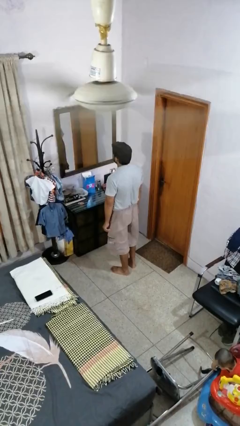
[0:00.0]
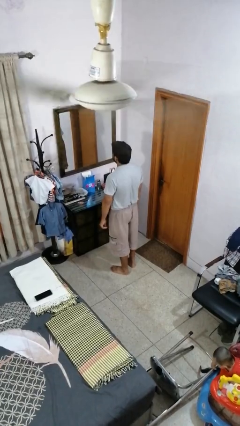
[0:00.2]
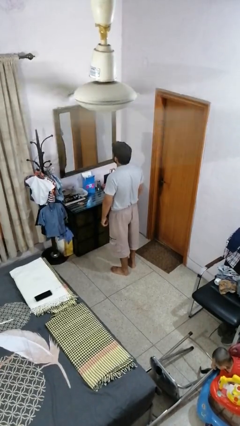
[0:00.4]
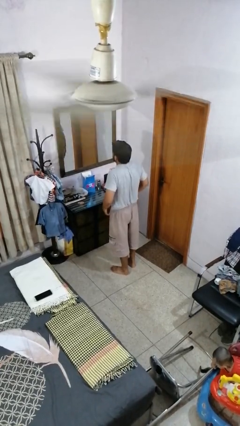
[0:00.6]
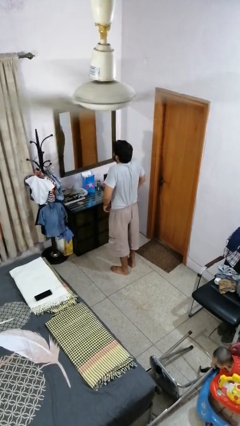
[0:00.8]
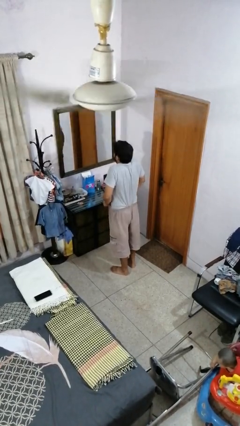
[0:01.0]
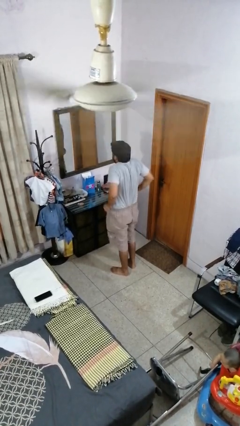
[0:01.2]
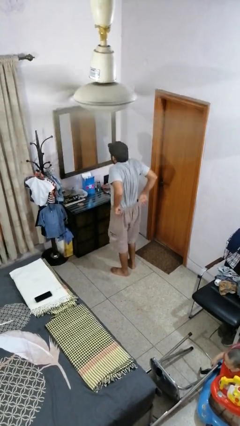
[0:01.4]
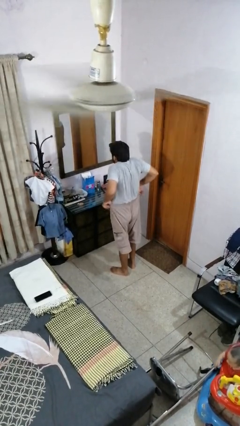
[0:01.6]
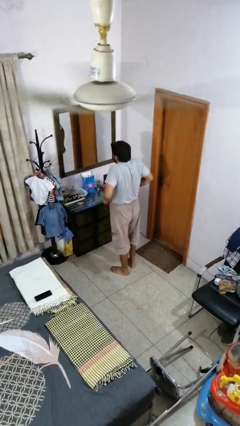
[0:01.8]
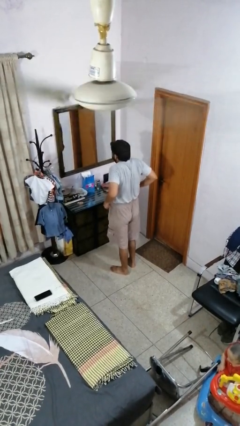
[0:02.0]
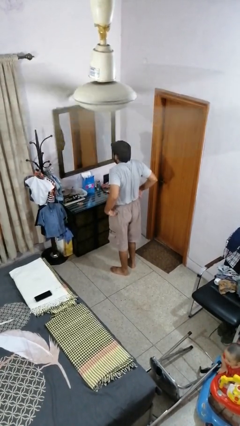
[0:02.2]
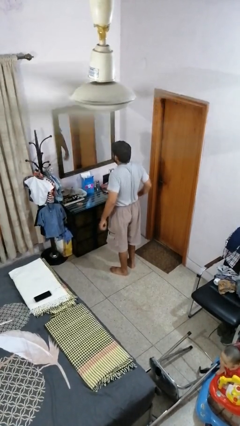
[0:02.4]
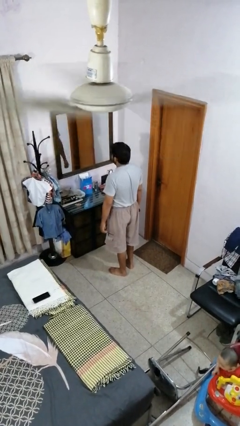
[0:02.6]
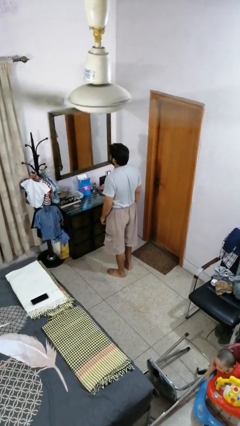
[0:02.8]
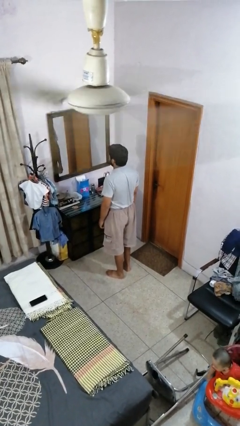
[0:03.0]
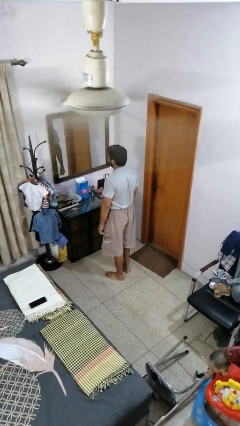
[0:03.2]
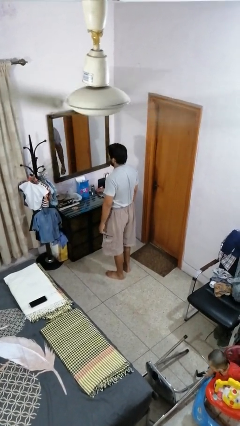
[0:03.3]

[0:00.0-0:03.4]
person hikes up pants

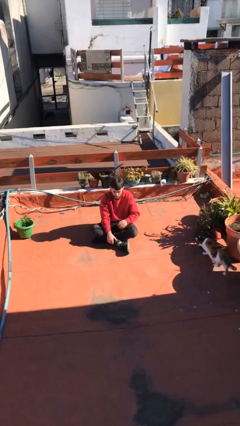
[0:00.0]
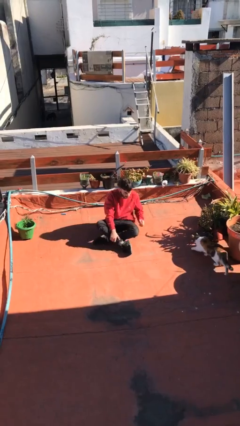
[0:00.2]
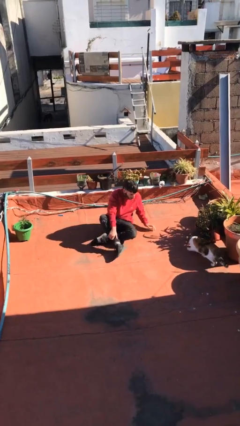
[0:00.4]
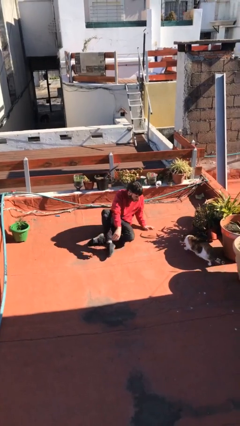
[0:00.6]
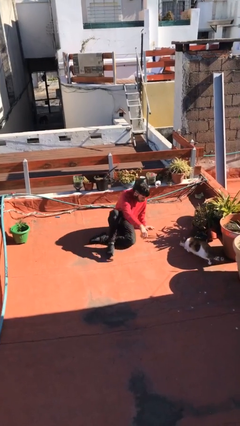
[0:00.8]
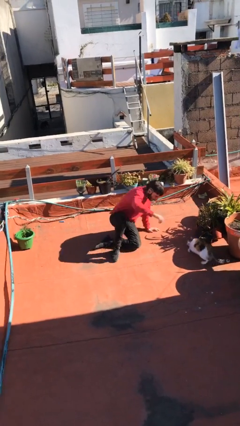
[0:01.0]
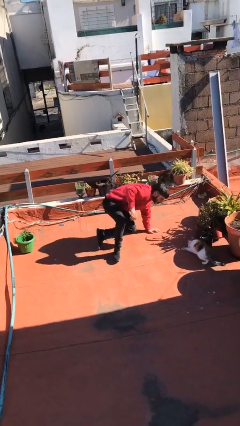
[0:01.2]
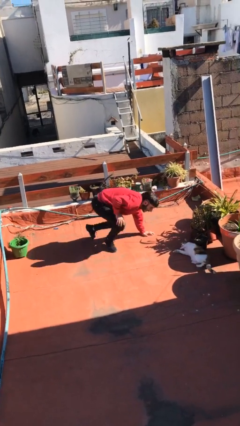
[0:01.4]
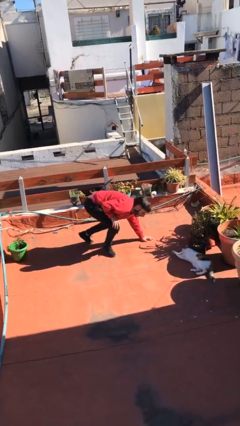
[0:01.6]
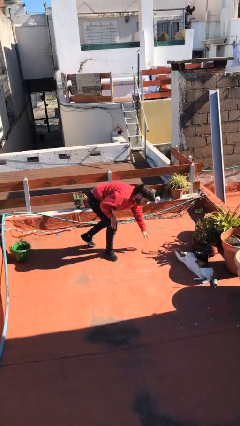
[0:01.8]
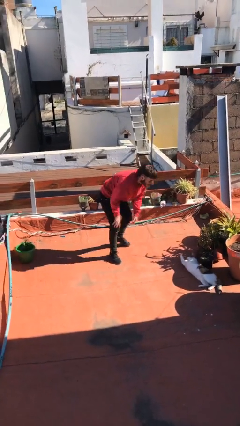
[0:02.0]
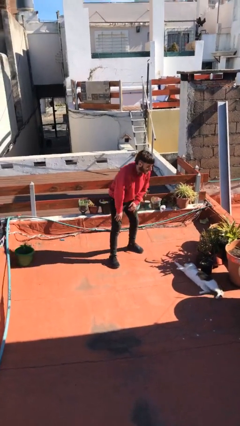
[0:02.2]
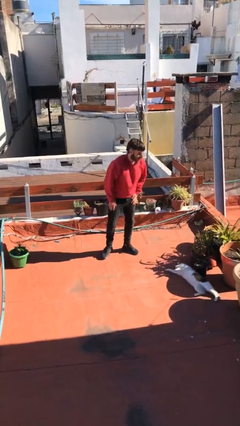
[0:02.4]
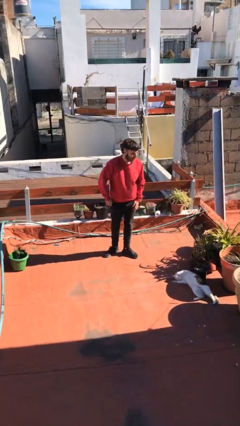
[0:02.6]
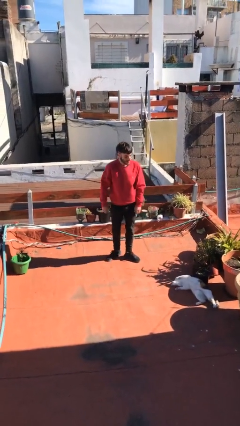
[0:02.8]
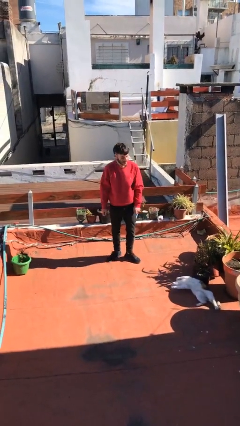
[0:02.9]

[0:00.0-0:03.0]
person stands up from floor

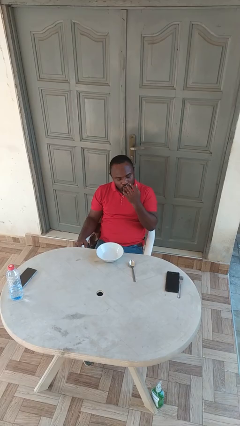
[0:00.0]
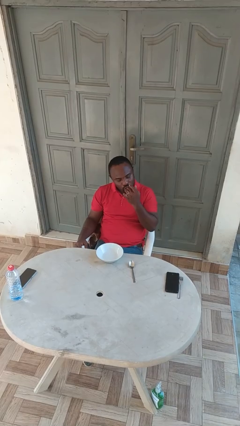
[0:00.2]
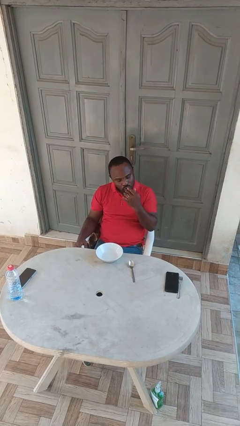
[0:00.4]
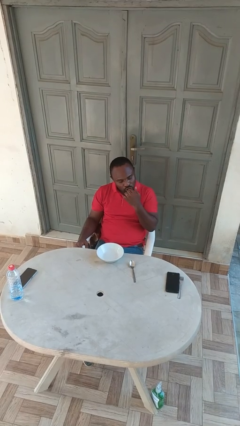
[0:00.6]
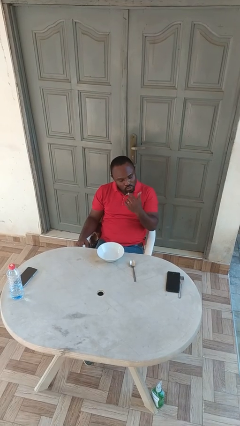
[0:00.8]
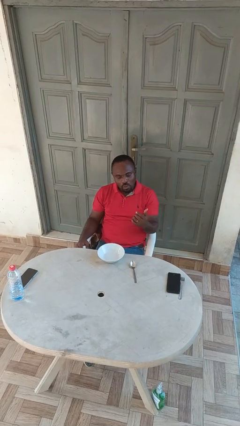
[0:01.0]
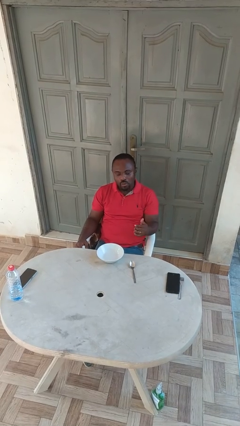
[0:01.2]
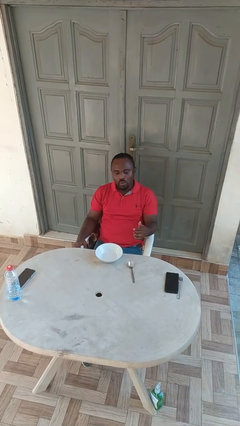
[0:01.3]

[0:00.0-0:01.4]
person licks fingers

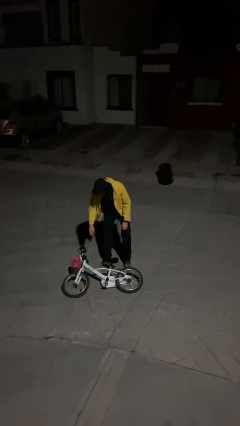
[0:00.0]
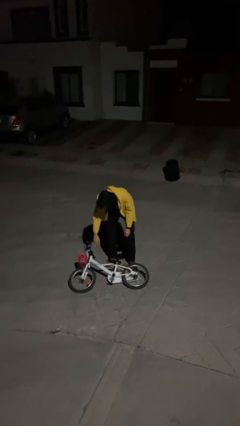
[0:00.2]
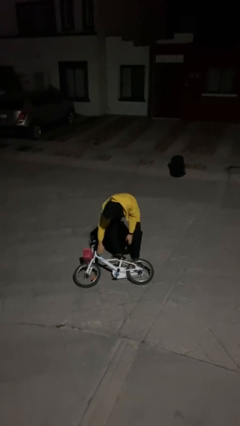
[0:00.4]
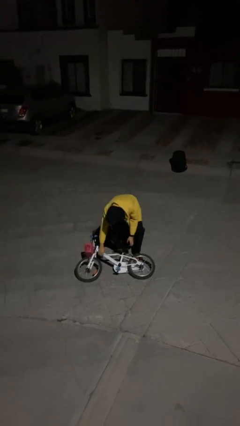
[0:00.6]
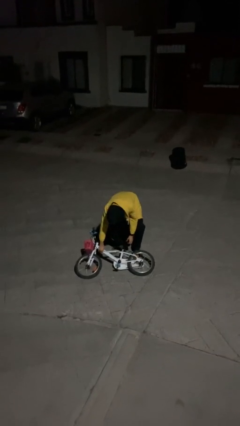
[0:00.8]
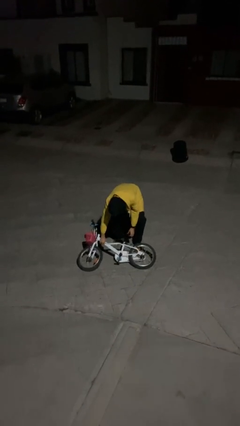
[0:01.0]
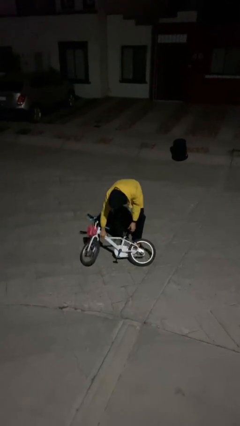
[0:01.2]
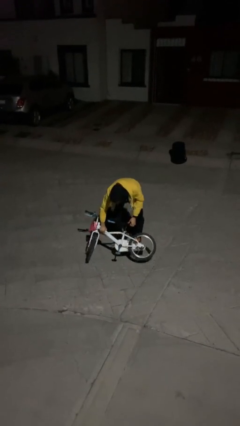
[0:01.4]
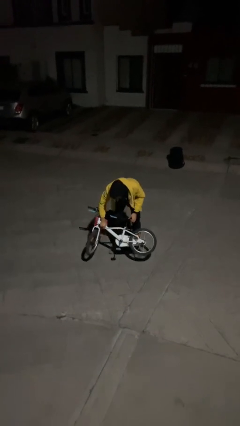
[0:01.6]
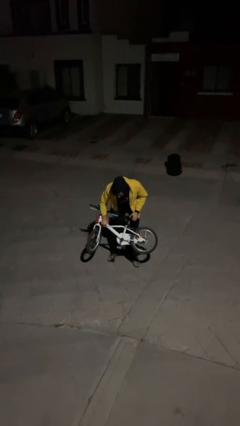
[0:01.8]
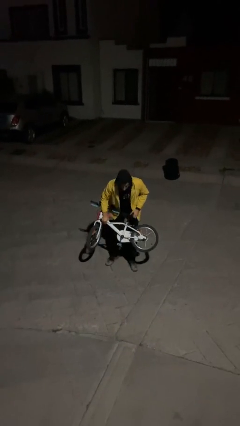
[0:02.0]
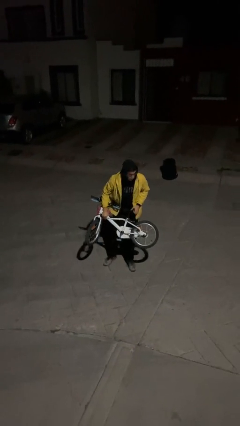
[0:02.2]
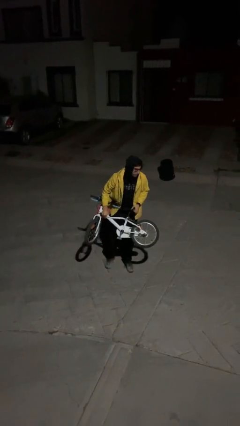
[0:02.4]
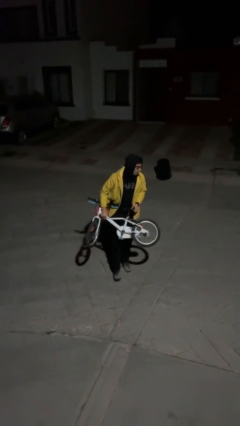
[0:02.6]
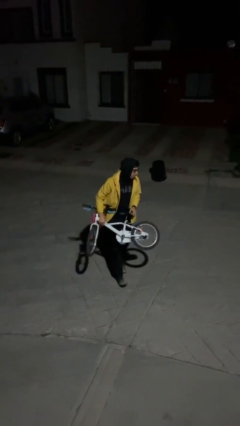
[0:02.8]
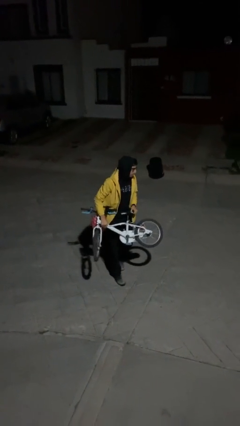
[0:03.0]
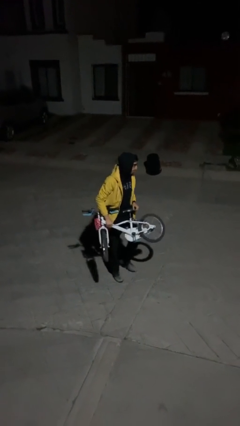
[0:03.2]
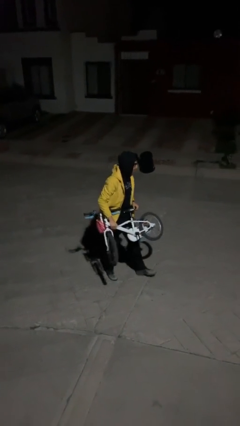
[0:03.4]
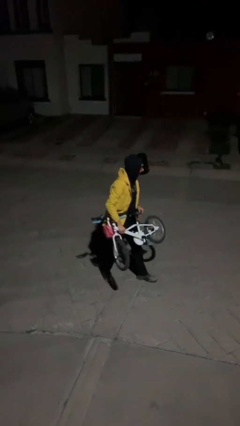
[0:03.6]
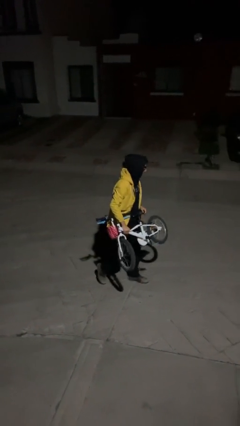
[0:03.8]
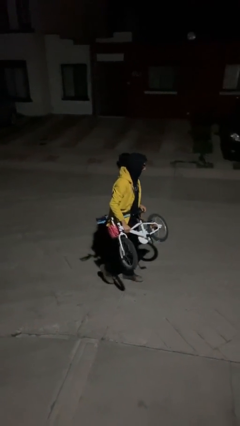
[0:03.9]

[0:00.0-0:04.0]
person picks up object from floor

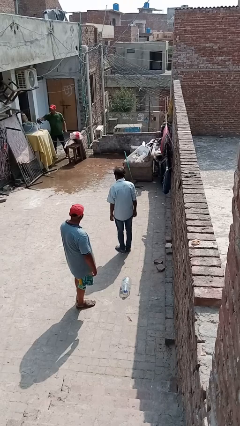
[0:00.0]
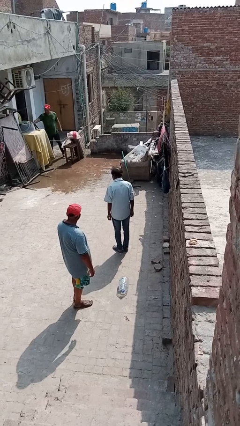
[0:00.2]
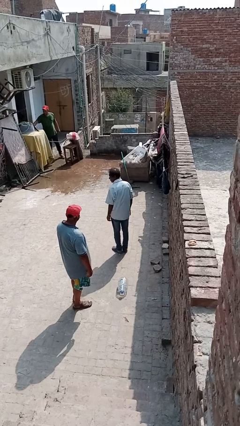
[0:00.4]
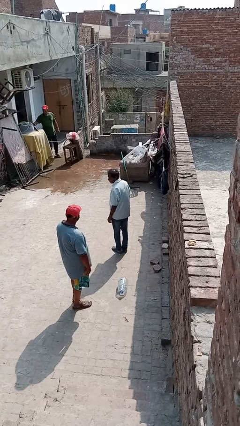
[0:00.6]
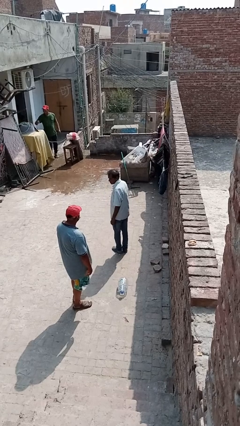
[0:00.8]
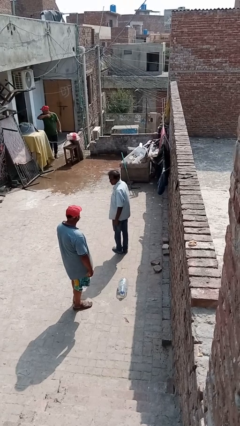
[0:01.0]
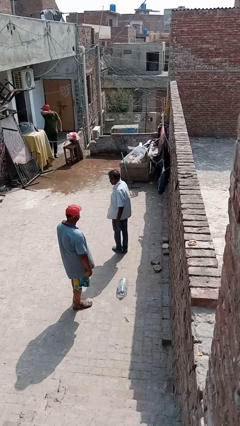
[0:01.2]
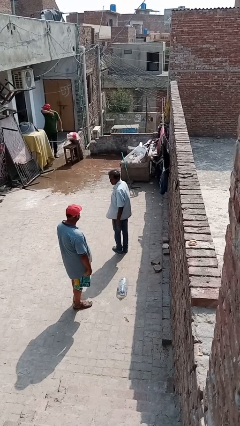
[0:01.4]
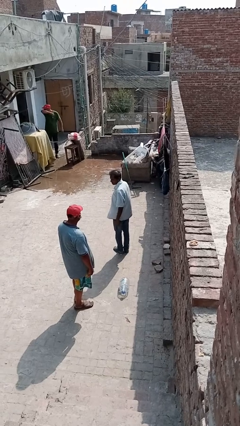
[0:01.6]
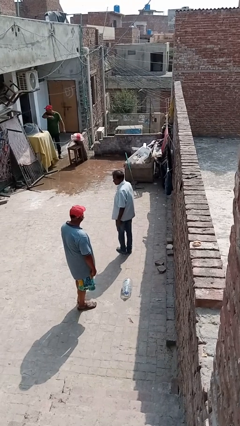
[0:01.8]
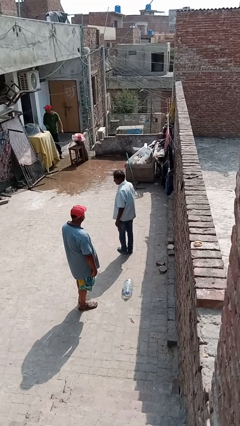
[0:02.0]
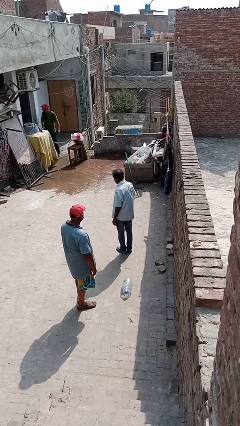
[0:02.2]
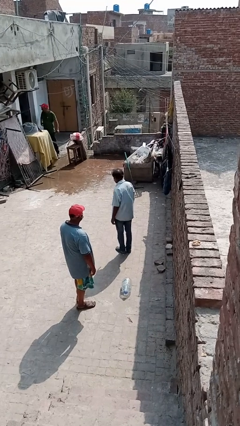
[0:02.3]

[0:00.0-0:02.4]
person looks over shoulder

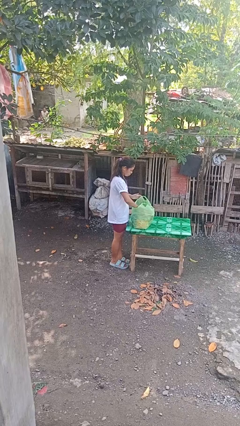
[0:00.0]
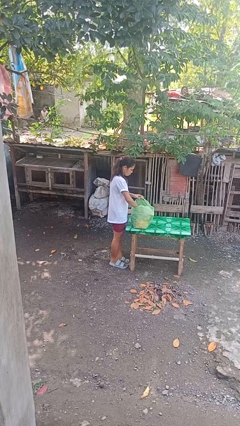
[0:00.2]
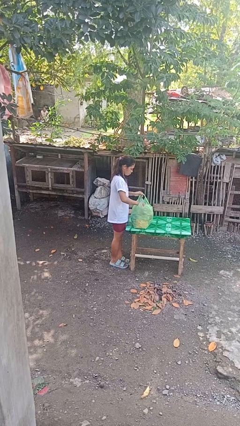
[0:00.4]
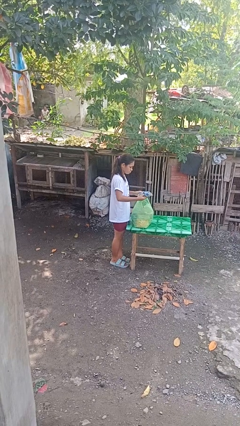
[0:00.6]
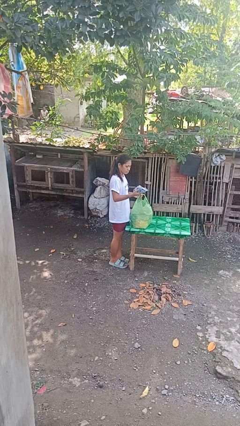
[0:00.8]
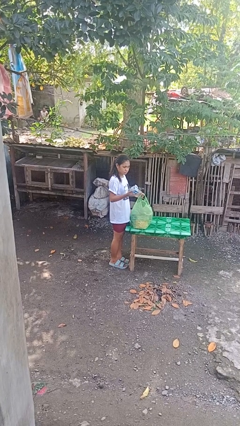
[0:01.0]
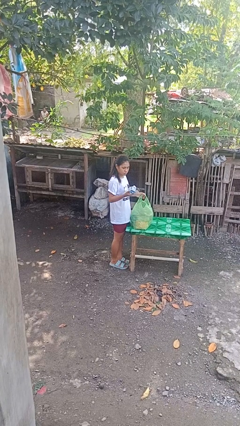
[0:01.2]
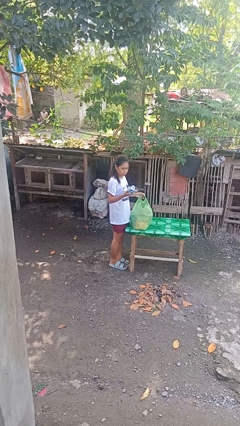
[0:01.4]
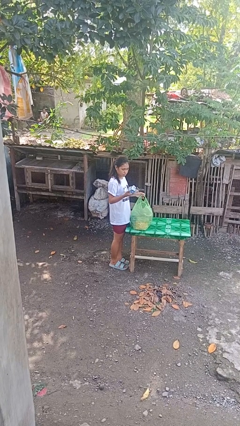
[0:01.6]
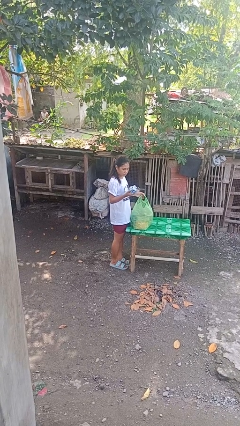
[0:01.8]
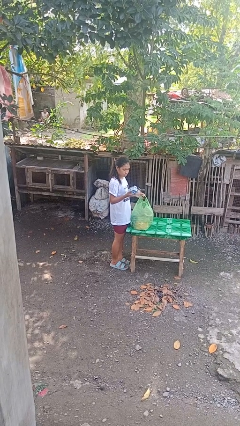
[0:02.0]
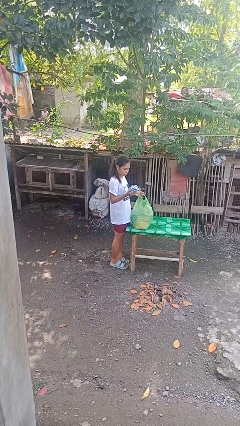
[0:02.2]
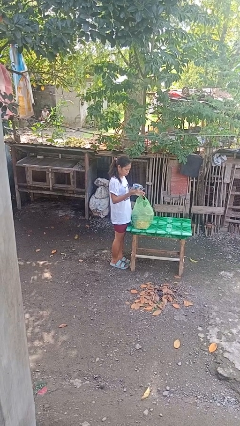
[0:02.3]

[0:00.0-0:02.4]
person takes object from bag

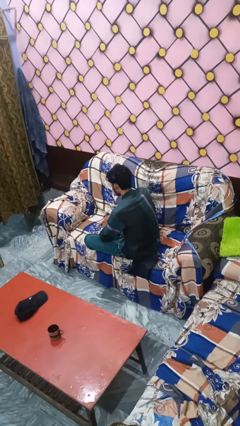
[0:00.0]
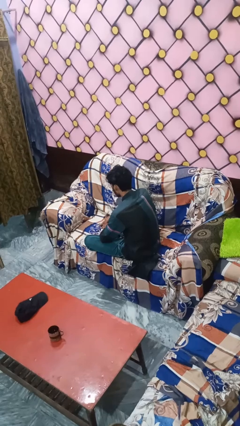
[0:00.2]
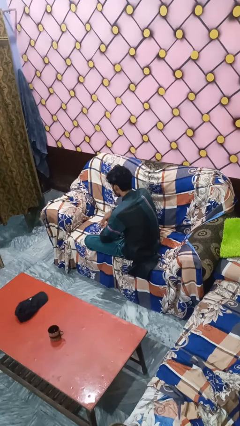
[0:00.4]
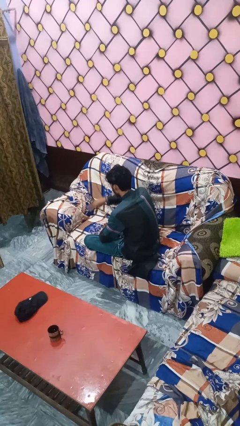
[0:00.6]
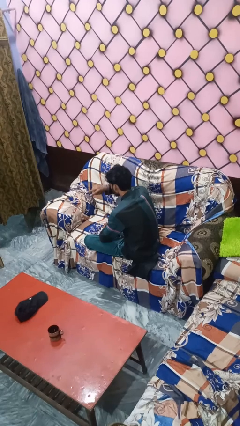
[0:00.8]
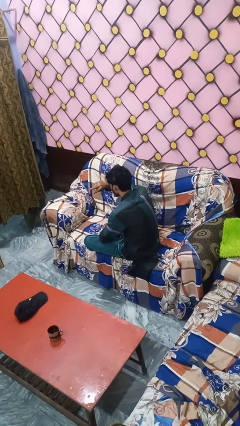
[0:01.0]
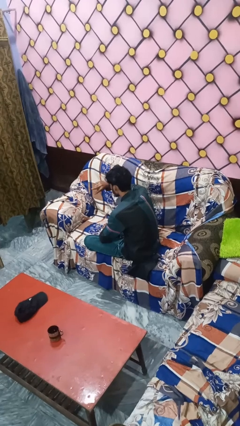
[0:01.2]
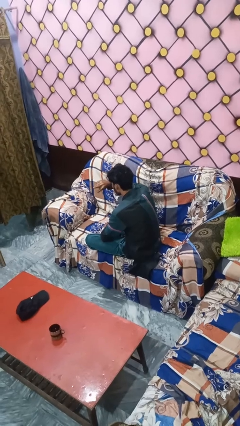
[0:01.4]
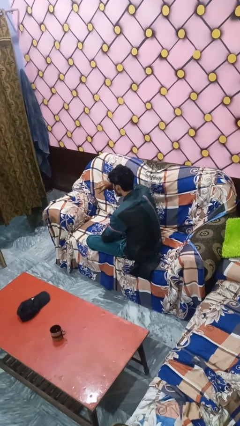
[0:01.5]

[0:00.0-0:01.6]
person gestures watch closely
